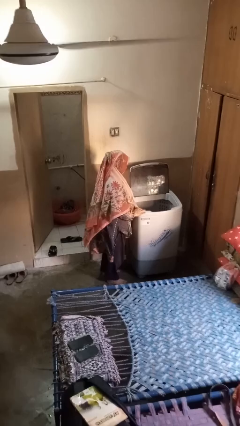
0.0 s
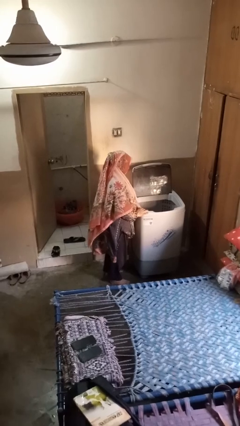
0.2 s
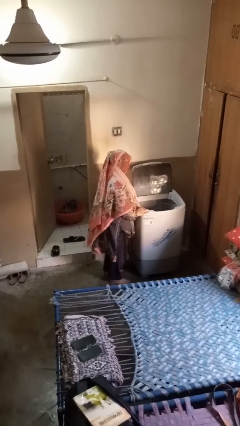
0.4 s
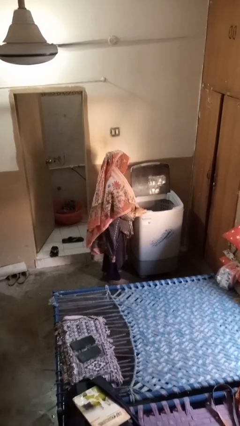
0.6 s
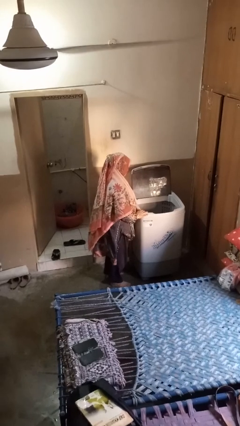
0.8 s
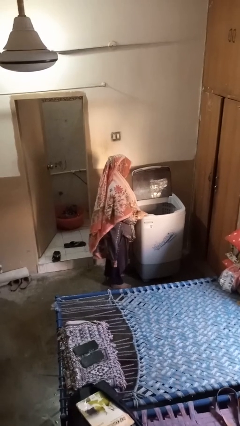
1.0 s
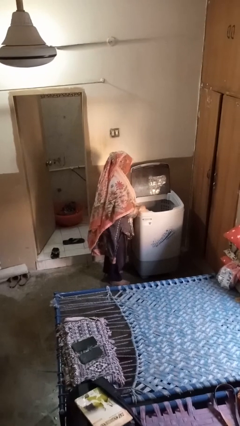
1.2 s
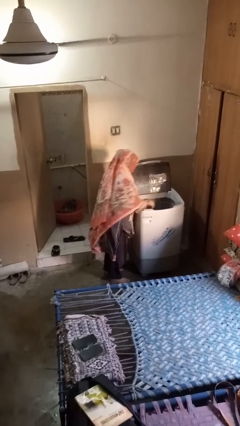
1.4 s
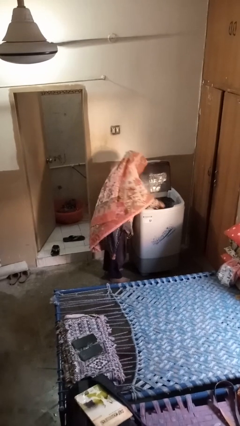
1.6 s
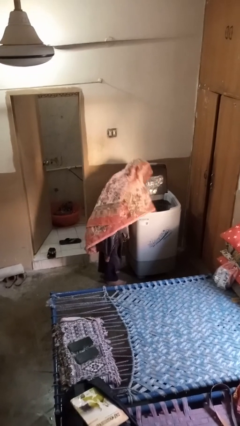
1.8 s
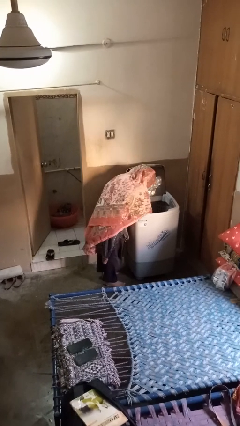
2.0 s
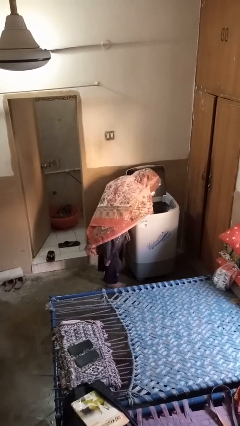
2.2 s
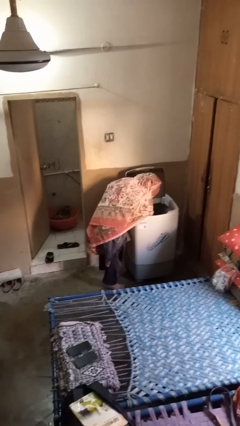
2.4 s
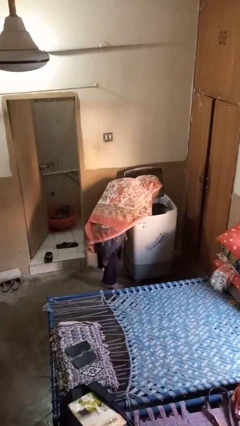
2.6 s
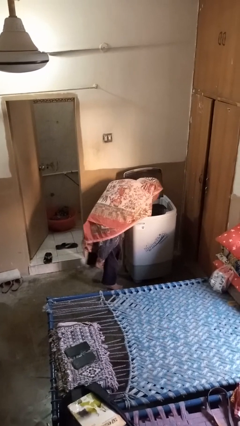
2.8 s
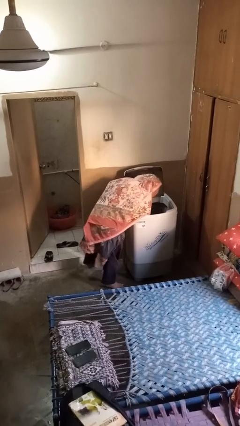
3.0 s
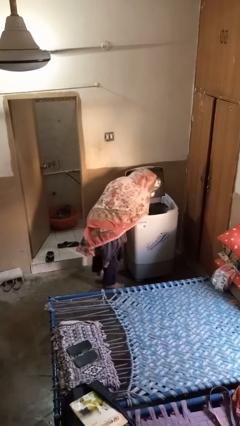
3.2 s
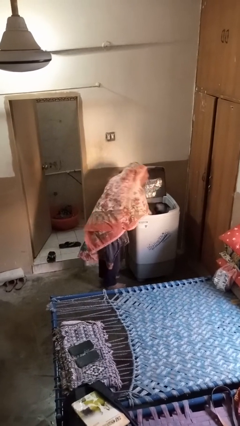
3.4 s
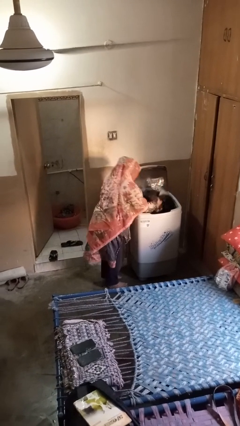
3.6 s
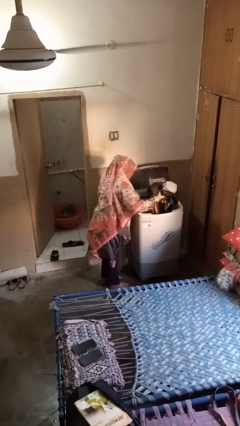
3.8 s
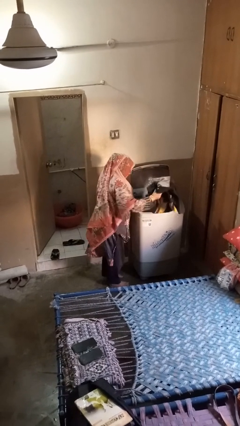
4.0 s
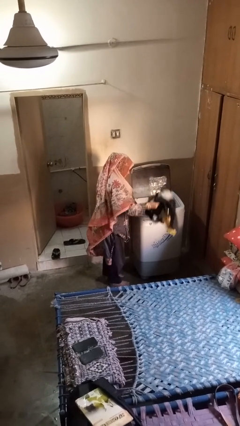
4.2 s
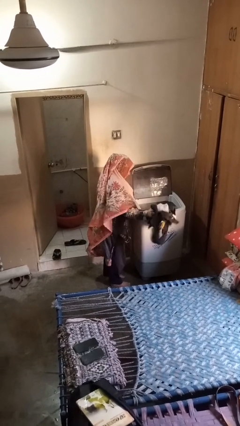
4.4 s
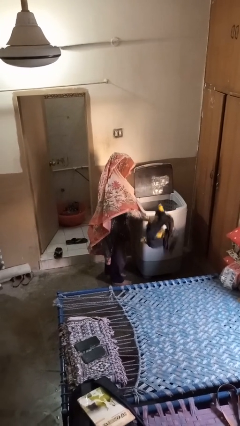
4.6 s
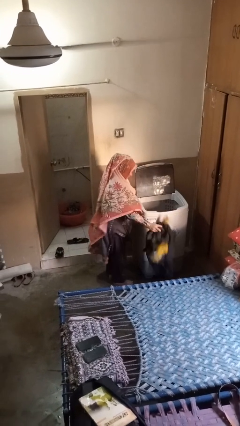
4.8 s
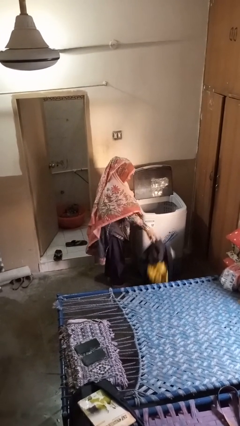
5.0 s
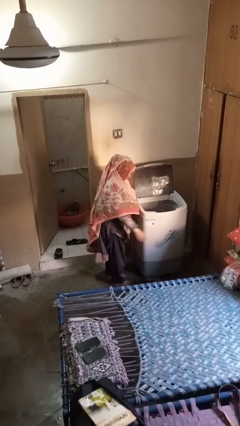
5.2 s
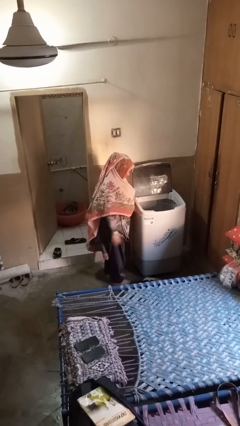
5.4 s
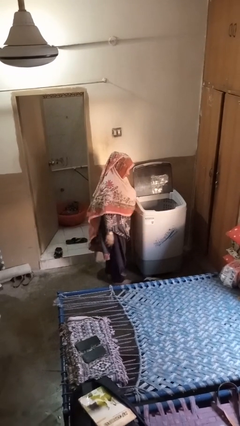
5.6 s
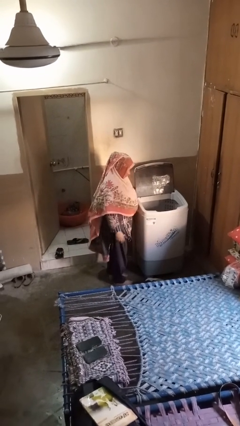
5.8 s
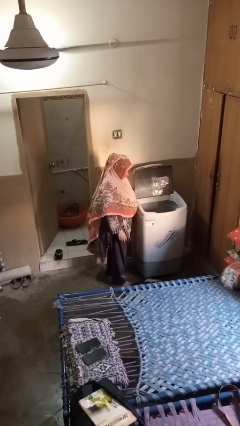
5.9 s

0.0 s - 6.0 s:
person unloads clotheswasher

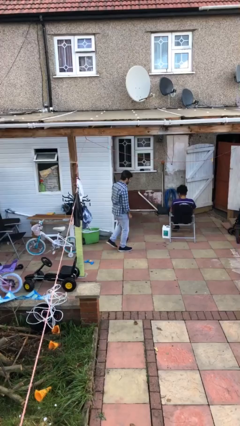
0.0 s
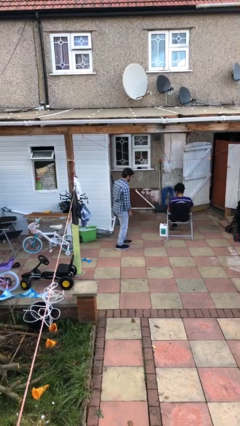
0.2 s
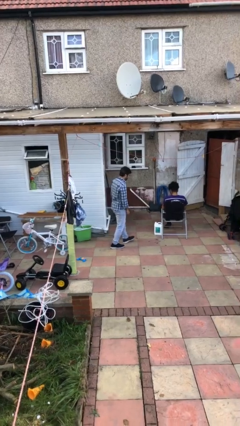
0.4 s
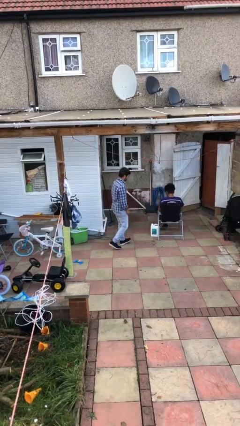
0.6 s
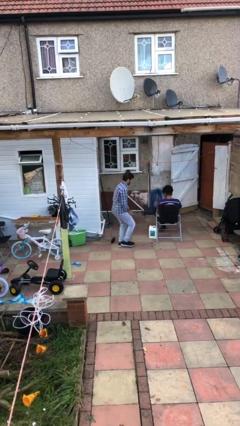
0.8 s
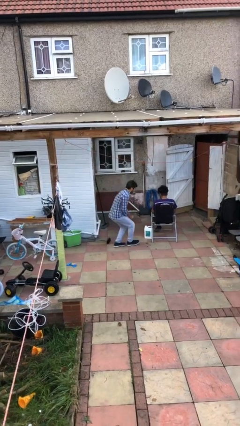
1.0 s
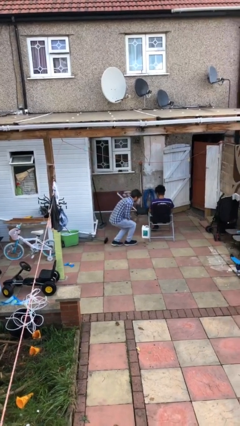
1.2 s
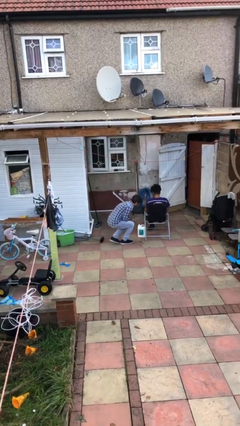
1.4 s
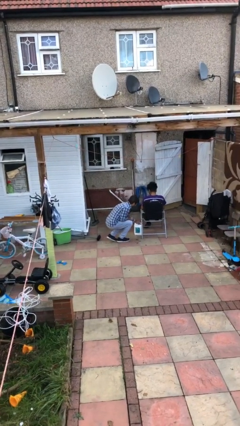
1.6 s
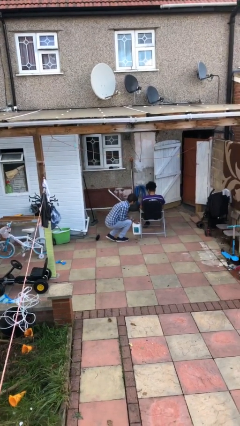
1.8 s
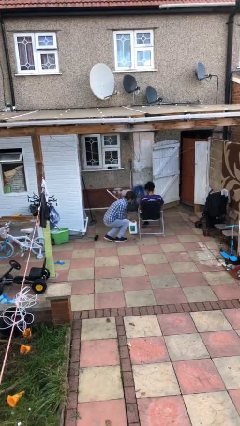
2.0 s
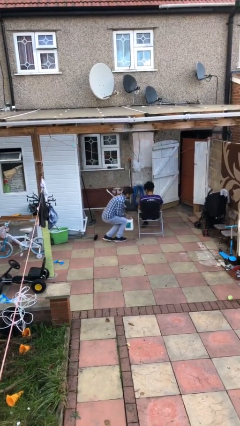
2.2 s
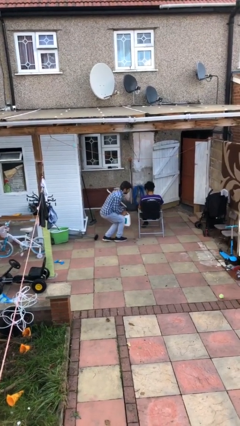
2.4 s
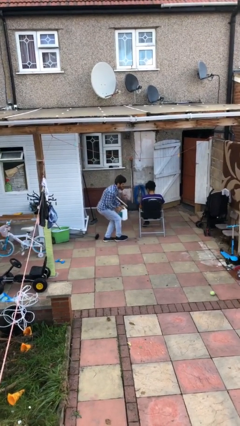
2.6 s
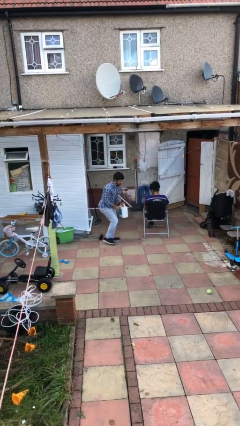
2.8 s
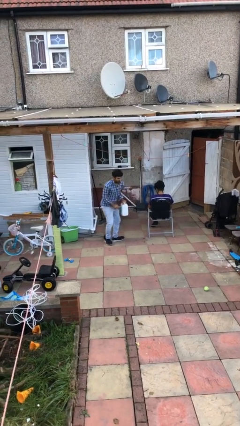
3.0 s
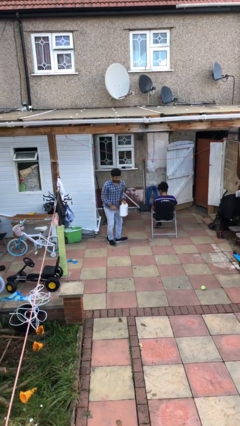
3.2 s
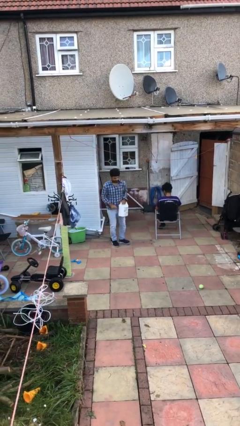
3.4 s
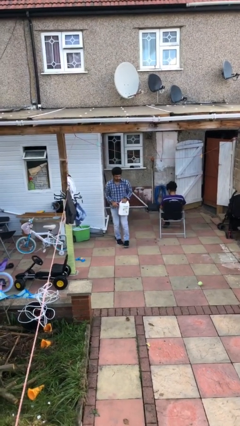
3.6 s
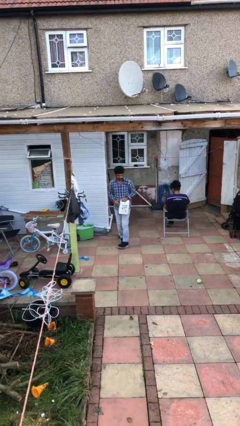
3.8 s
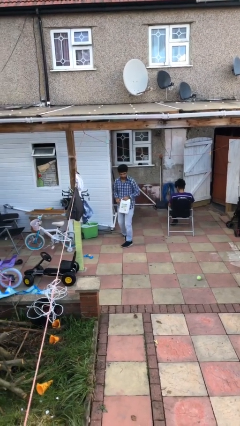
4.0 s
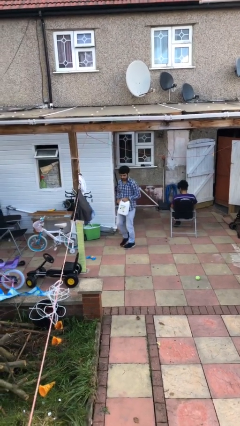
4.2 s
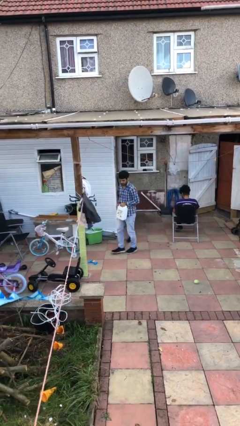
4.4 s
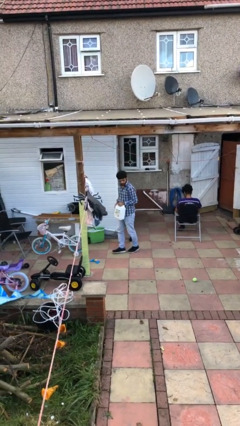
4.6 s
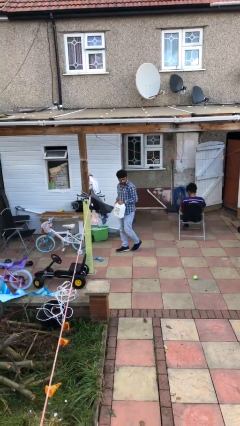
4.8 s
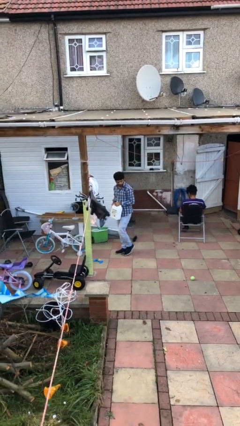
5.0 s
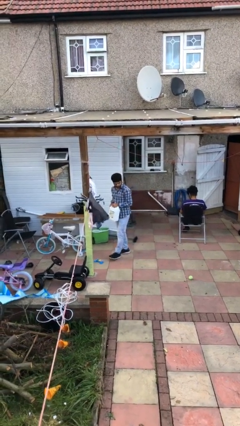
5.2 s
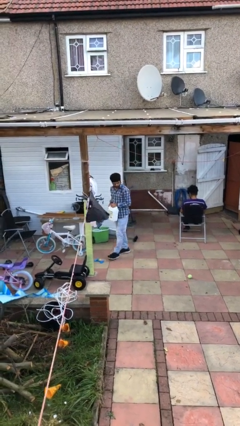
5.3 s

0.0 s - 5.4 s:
person steals object from person

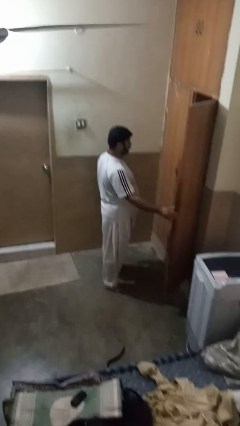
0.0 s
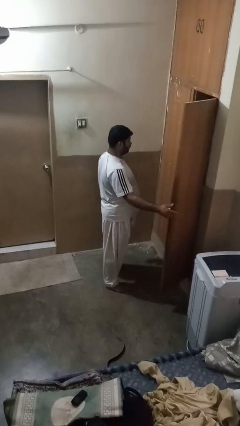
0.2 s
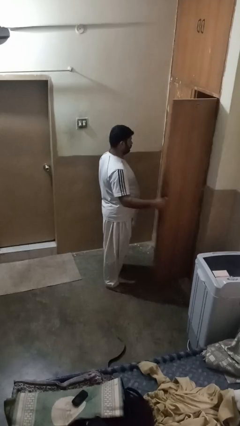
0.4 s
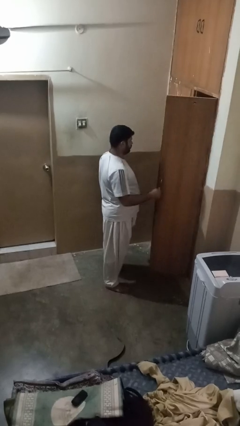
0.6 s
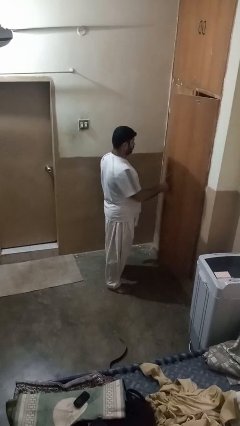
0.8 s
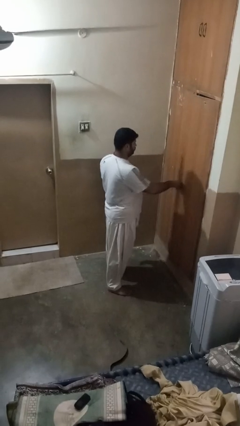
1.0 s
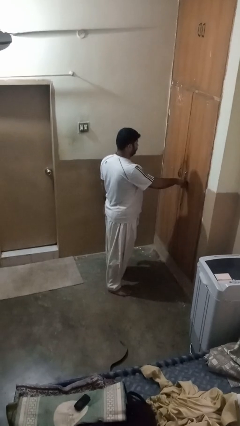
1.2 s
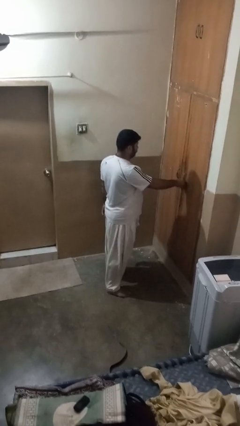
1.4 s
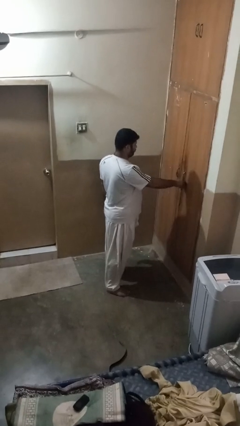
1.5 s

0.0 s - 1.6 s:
person closes closet door

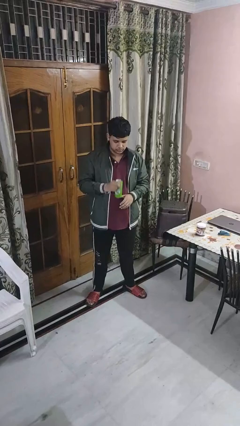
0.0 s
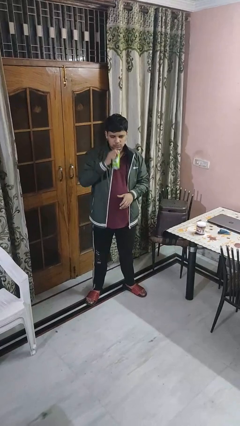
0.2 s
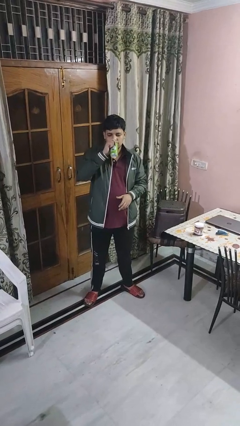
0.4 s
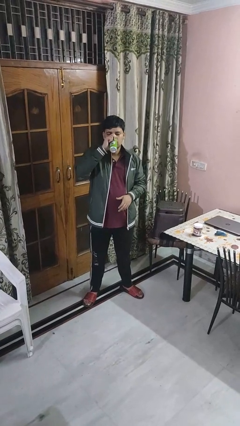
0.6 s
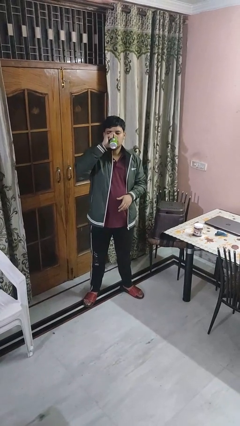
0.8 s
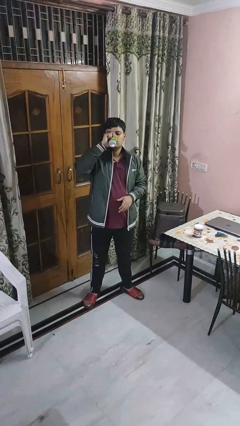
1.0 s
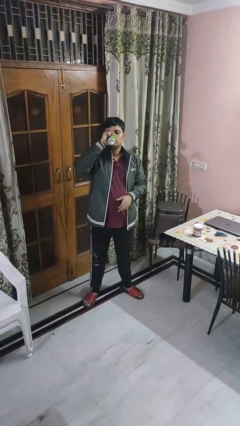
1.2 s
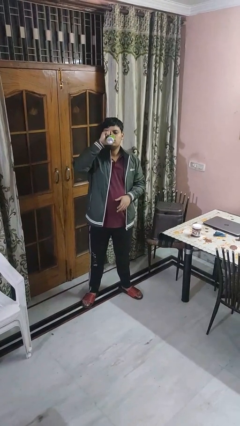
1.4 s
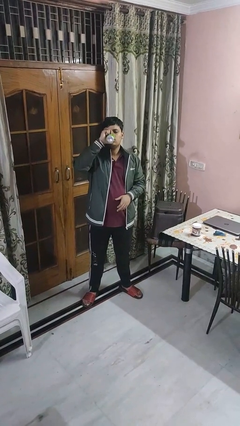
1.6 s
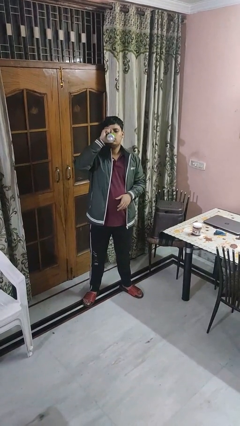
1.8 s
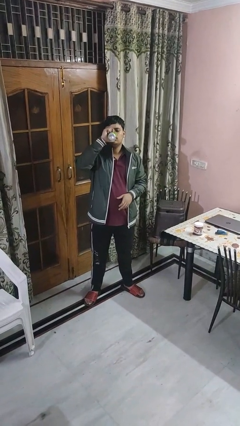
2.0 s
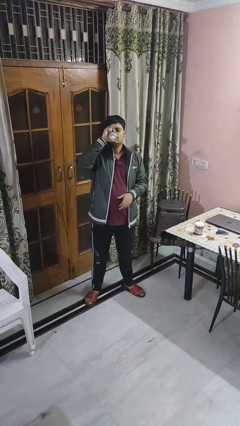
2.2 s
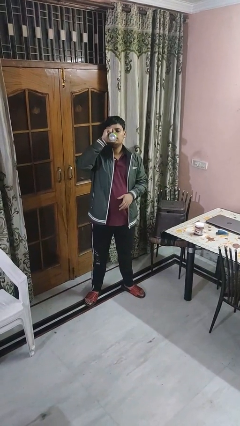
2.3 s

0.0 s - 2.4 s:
person drinks from beverage can

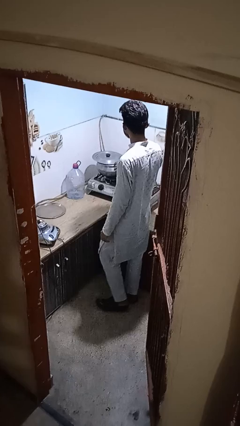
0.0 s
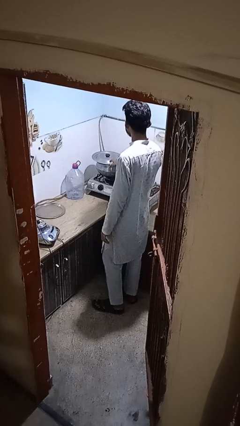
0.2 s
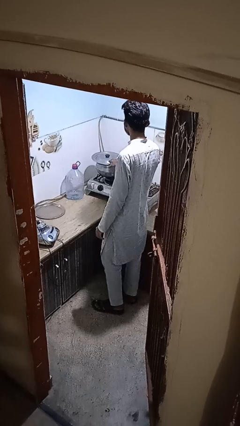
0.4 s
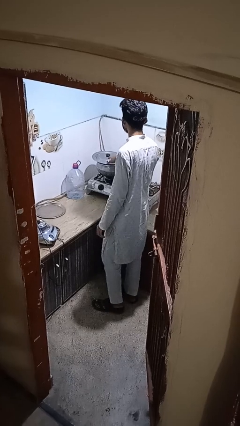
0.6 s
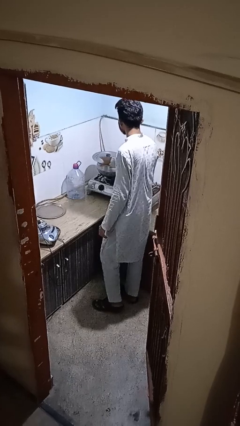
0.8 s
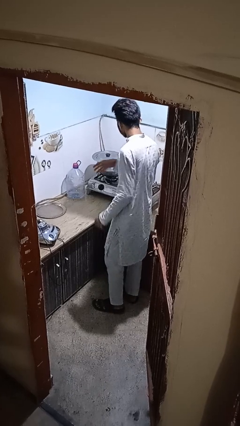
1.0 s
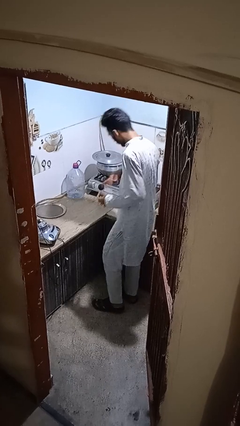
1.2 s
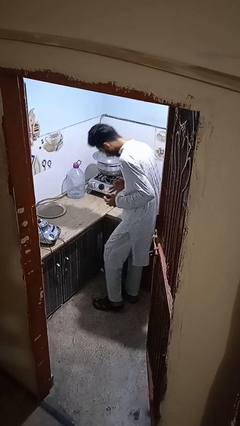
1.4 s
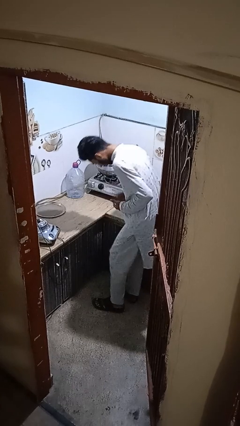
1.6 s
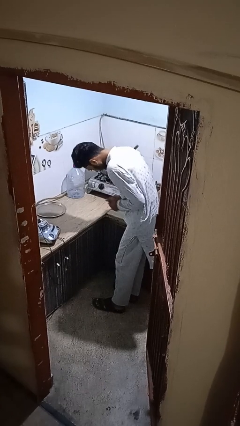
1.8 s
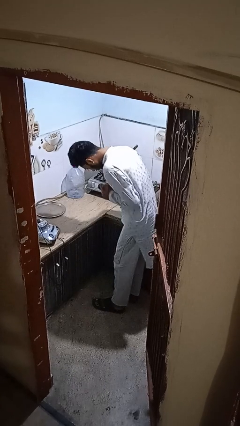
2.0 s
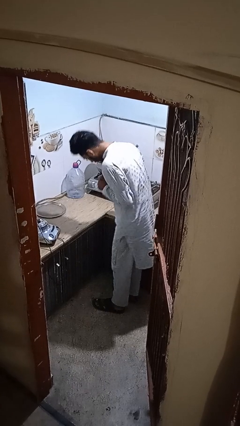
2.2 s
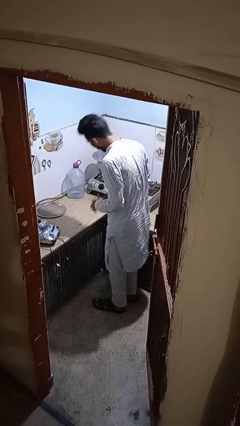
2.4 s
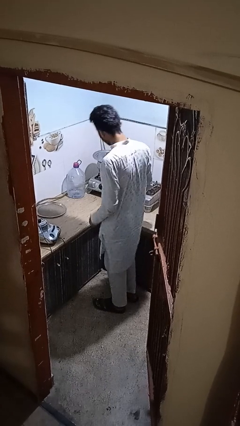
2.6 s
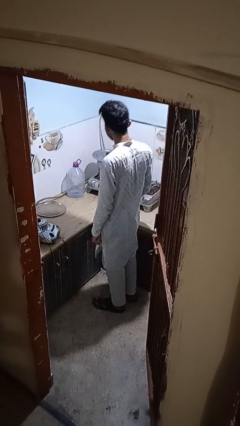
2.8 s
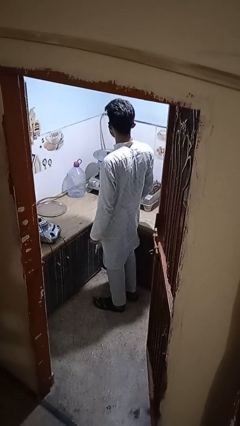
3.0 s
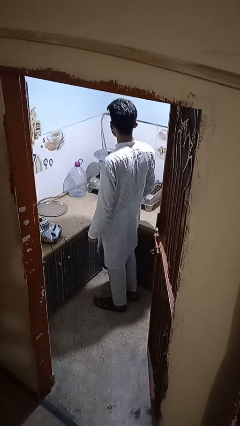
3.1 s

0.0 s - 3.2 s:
person burns hand
